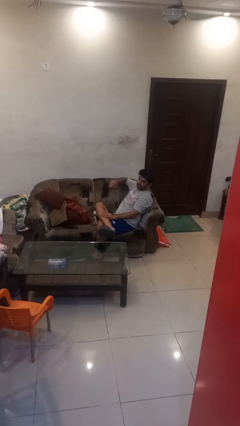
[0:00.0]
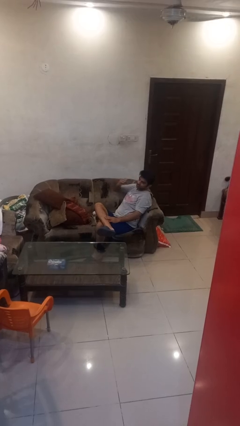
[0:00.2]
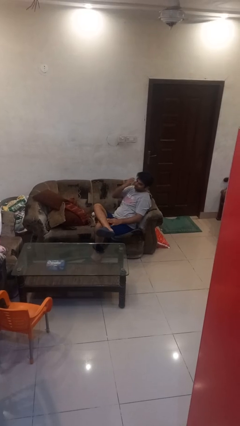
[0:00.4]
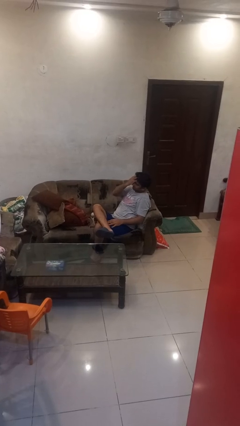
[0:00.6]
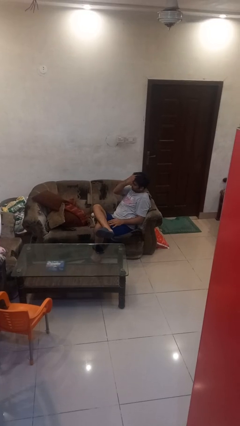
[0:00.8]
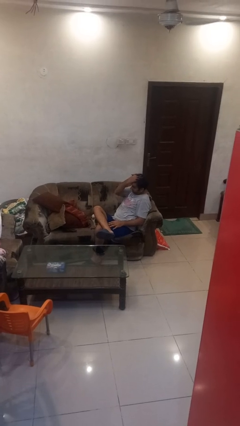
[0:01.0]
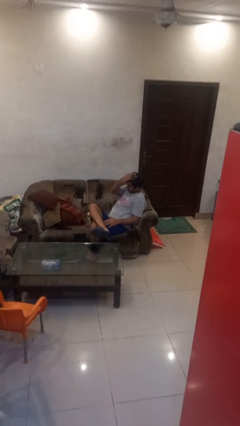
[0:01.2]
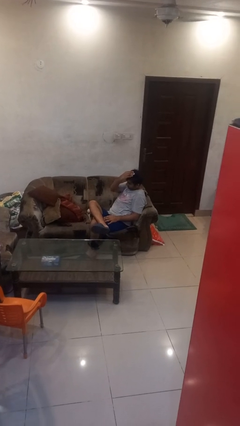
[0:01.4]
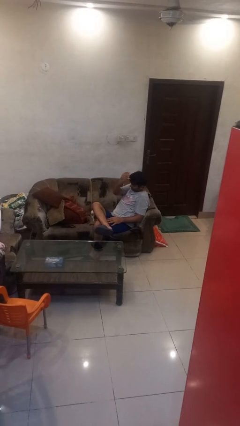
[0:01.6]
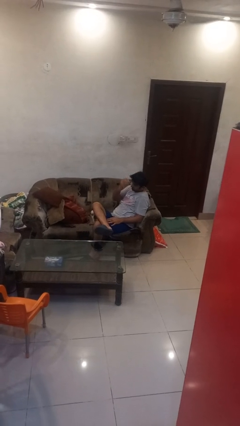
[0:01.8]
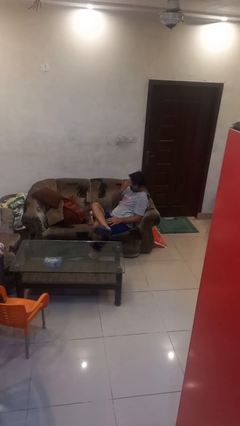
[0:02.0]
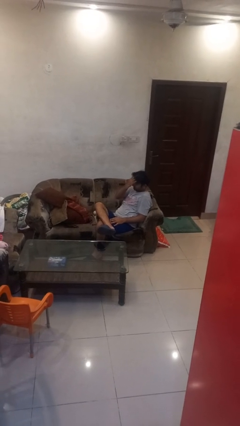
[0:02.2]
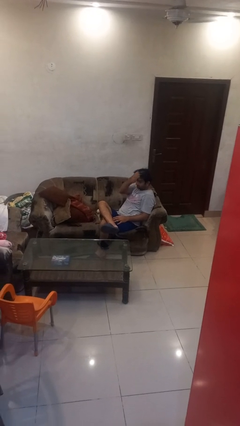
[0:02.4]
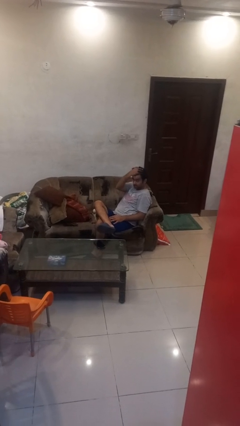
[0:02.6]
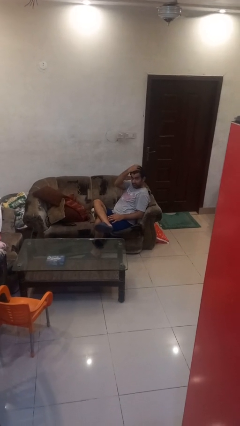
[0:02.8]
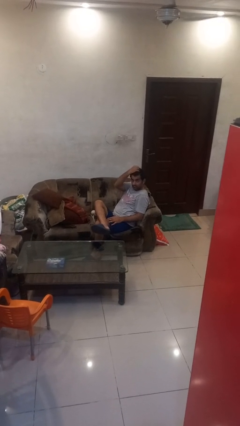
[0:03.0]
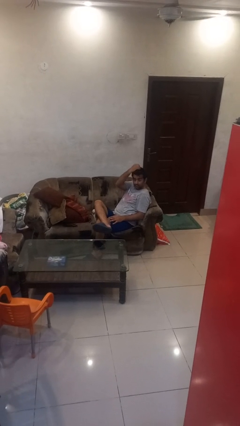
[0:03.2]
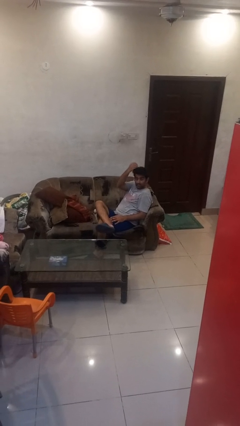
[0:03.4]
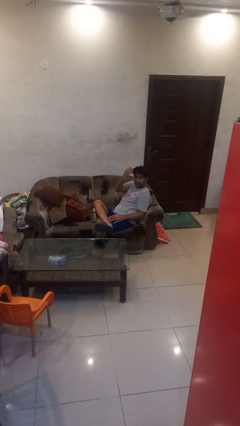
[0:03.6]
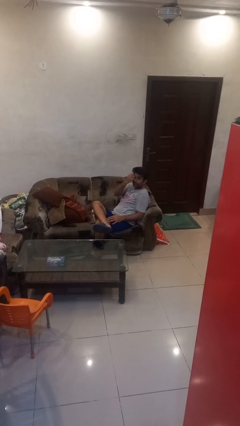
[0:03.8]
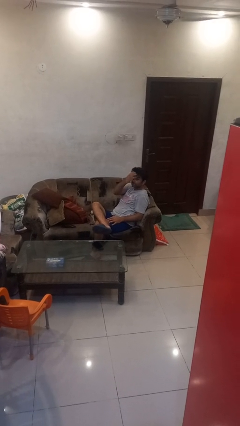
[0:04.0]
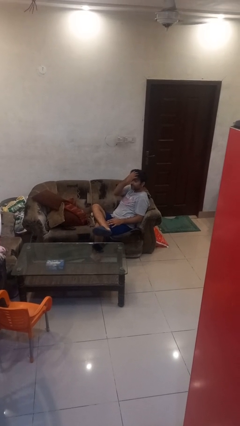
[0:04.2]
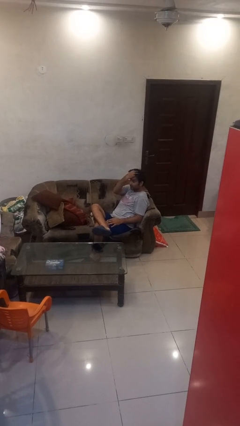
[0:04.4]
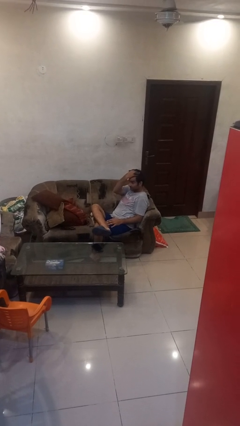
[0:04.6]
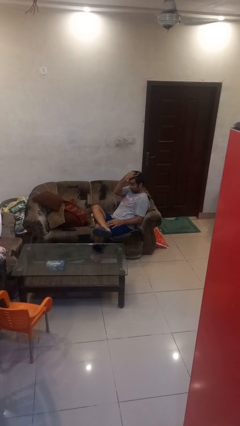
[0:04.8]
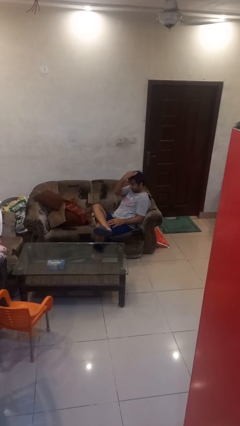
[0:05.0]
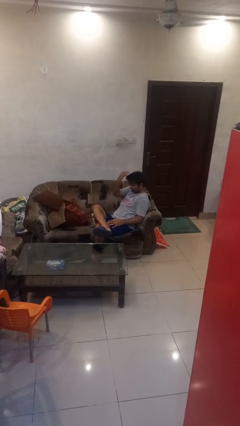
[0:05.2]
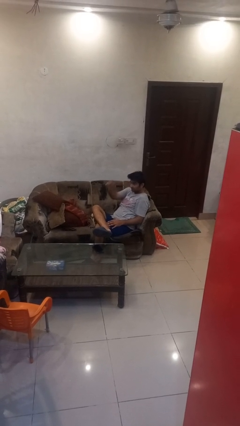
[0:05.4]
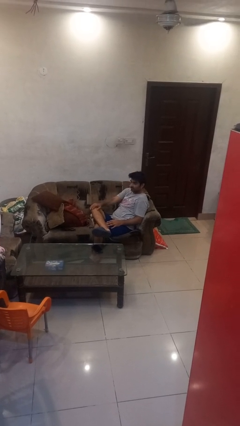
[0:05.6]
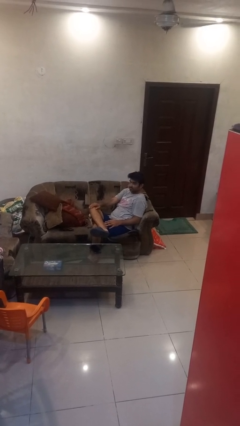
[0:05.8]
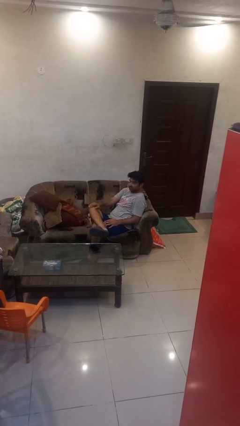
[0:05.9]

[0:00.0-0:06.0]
person strokes hair

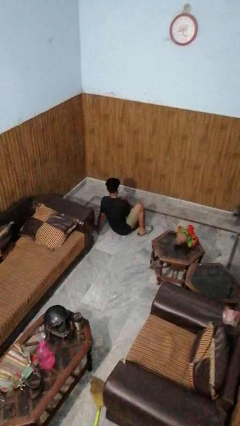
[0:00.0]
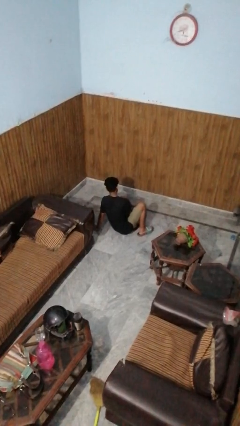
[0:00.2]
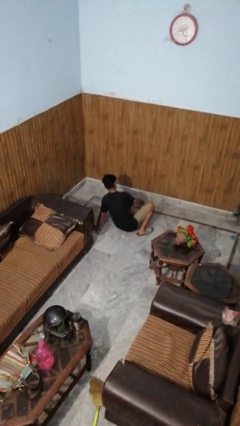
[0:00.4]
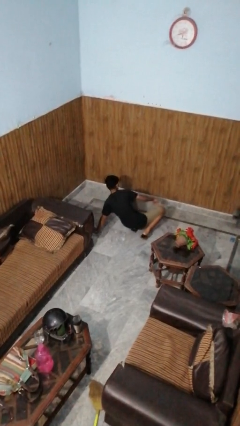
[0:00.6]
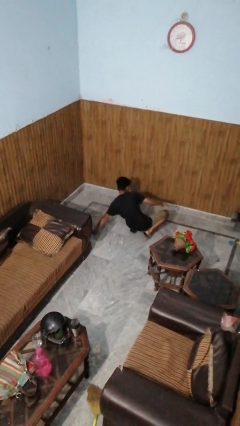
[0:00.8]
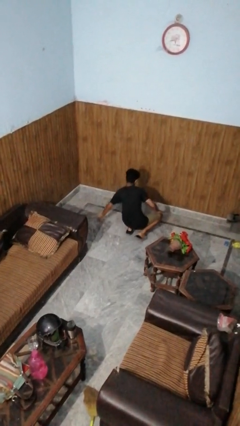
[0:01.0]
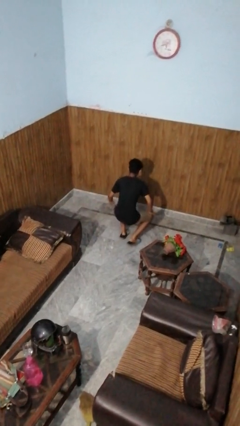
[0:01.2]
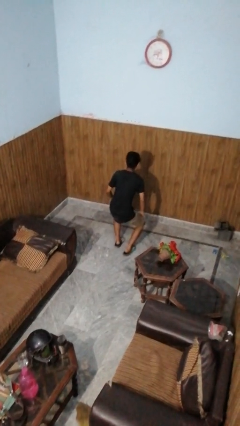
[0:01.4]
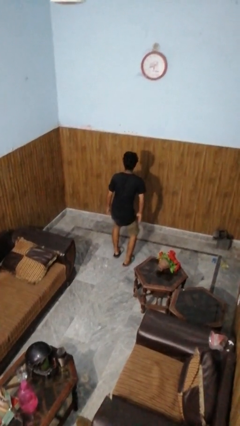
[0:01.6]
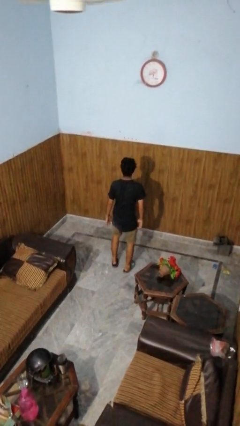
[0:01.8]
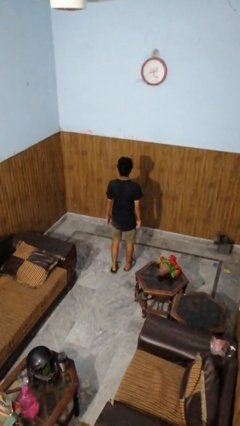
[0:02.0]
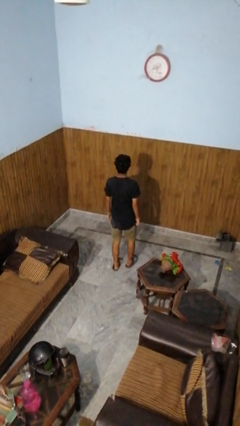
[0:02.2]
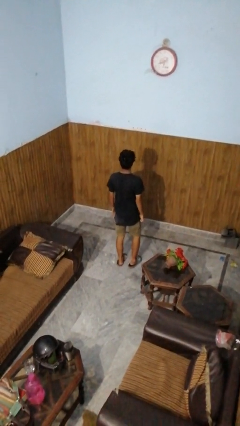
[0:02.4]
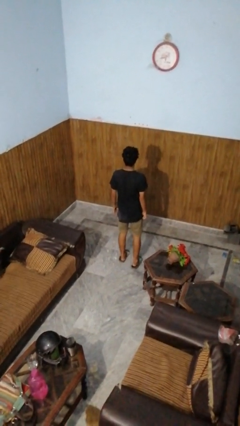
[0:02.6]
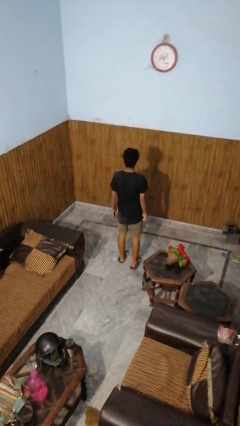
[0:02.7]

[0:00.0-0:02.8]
person stands up from floor

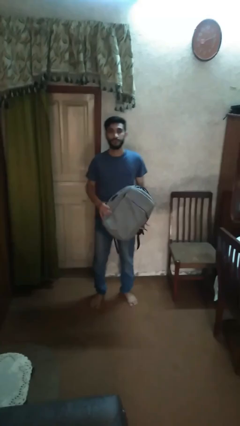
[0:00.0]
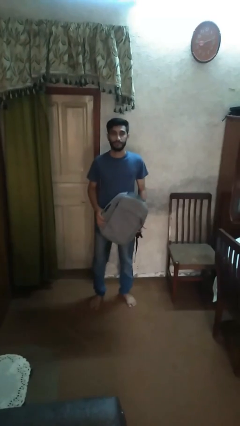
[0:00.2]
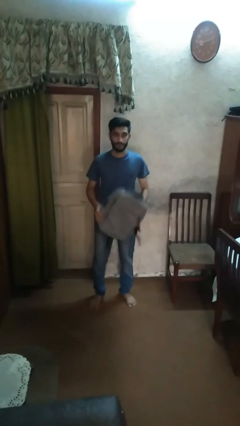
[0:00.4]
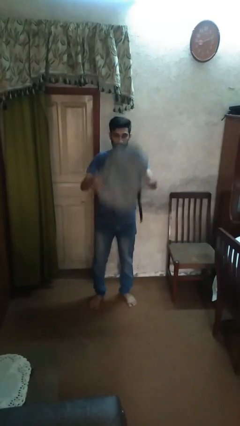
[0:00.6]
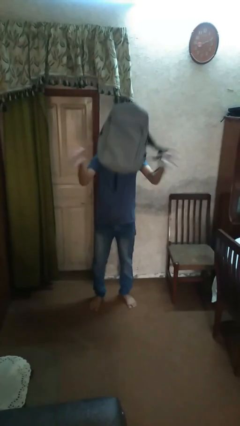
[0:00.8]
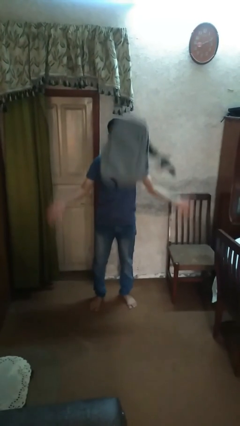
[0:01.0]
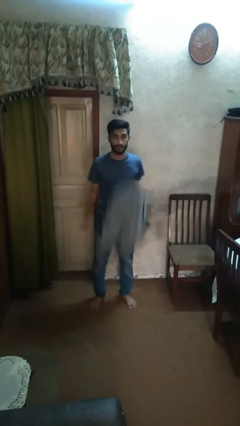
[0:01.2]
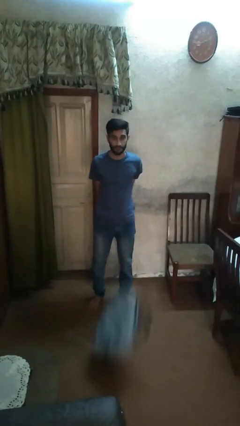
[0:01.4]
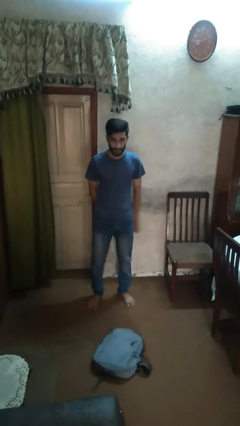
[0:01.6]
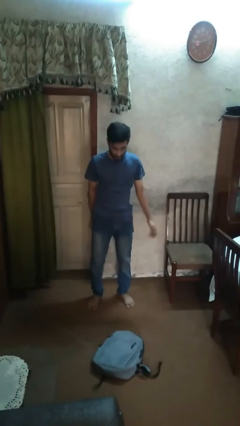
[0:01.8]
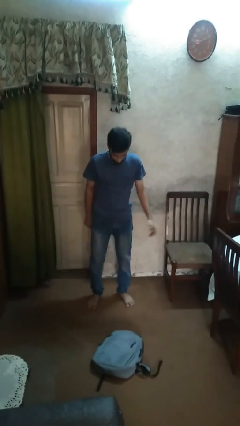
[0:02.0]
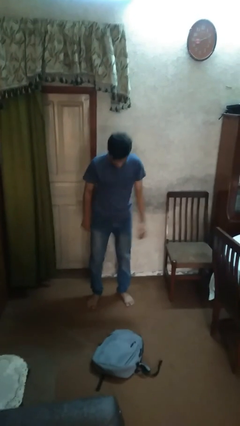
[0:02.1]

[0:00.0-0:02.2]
person throws object into air

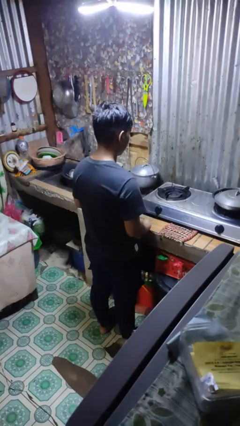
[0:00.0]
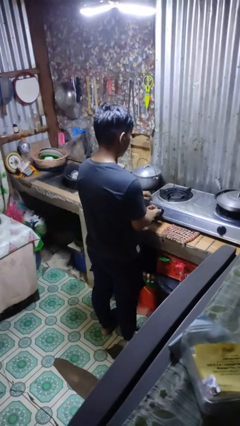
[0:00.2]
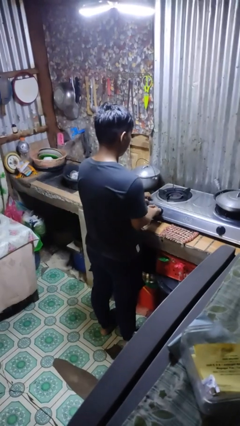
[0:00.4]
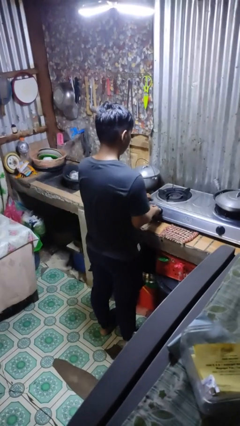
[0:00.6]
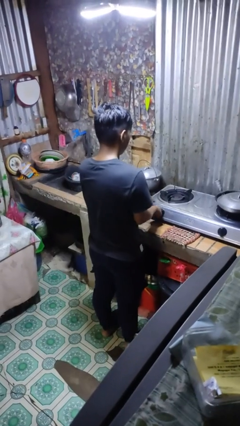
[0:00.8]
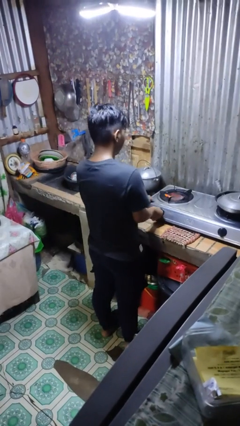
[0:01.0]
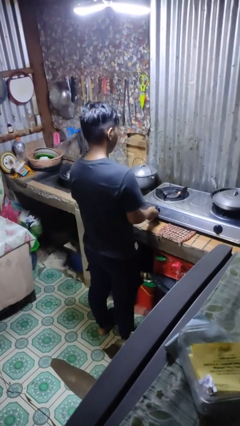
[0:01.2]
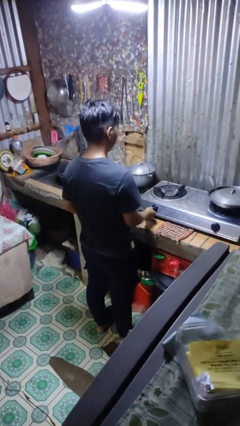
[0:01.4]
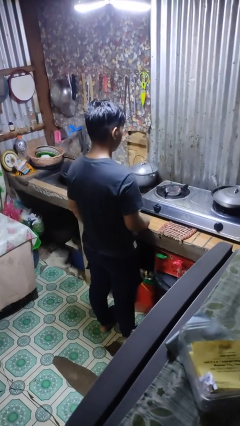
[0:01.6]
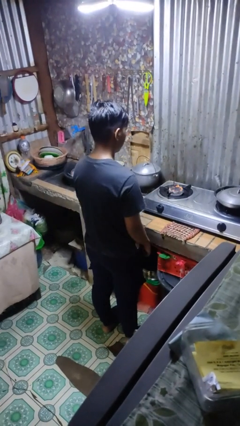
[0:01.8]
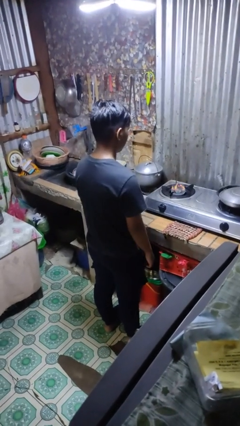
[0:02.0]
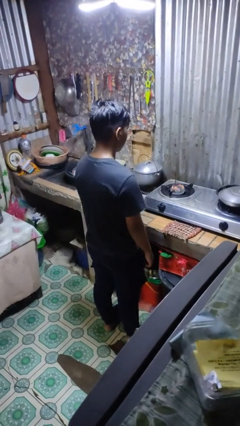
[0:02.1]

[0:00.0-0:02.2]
person turns on stovetop

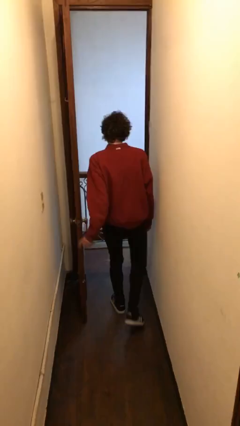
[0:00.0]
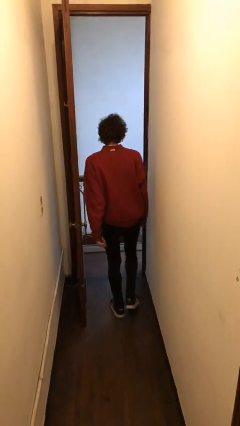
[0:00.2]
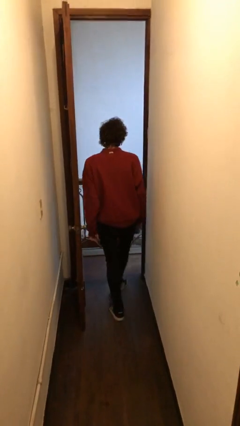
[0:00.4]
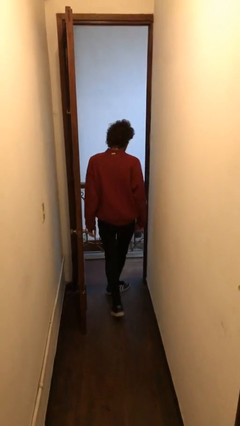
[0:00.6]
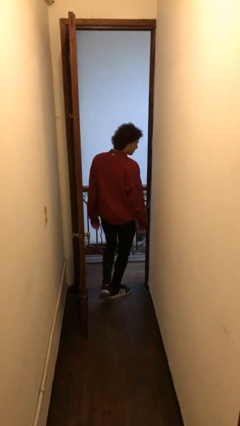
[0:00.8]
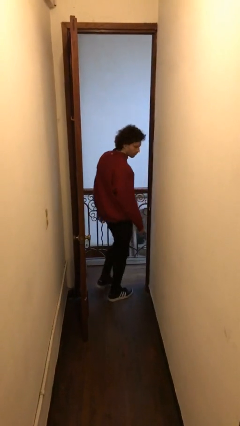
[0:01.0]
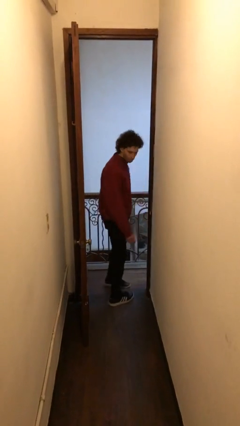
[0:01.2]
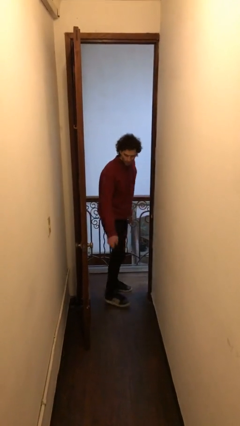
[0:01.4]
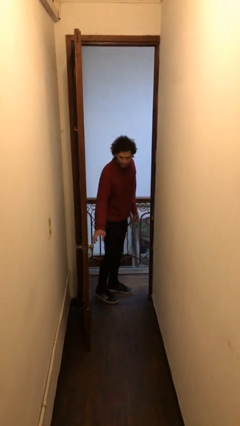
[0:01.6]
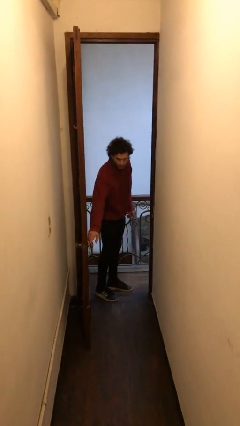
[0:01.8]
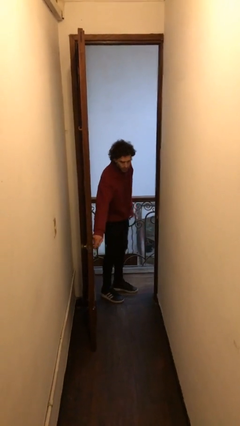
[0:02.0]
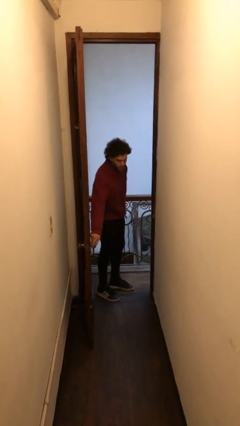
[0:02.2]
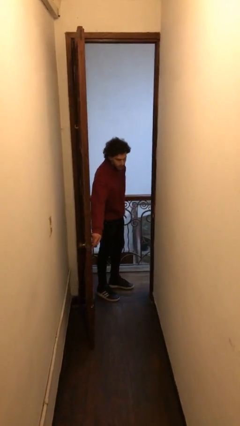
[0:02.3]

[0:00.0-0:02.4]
person exits scene through structure

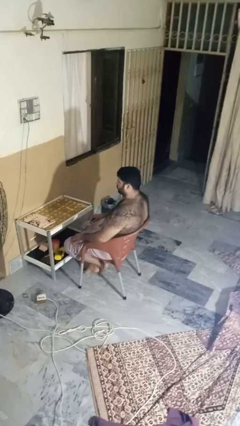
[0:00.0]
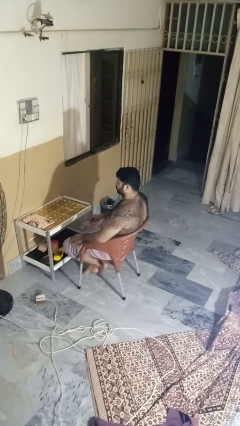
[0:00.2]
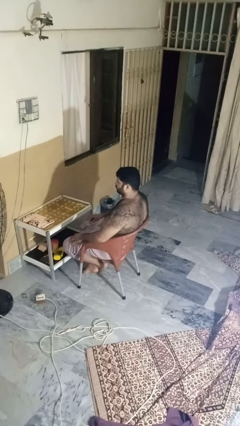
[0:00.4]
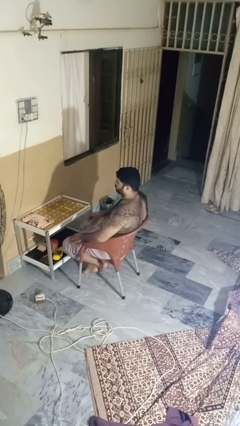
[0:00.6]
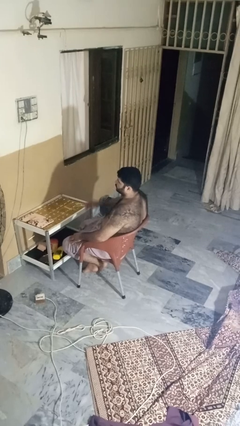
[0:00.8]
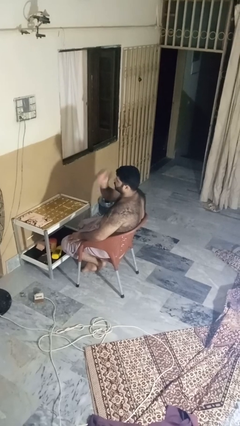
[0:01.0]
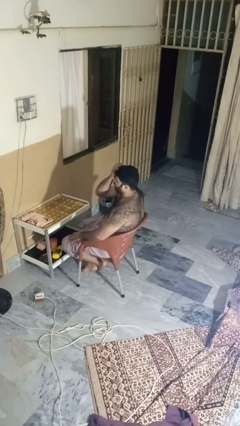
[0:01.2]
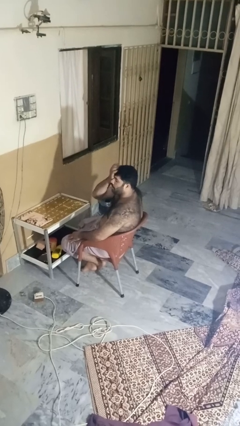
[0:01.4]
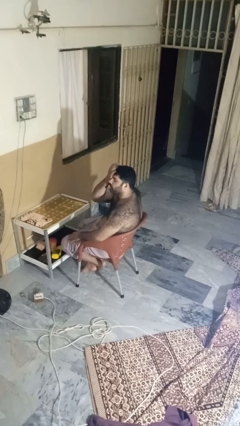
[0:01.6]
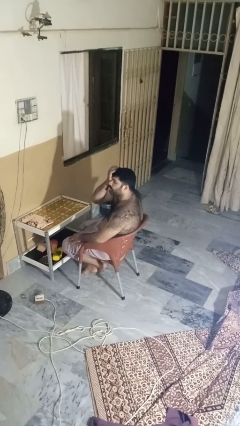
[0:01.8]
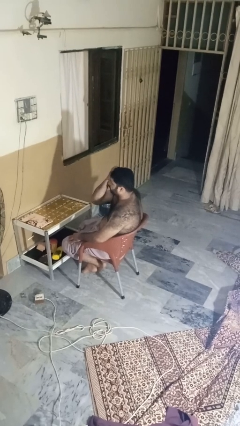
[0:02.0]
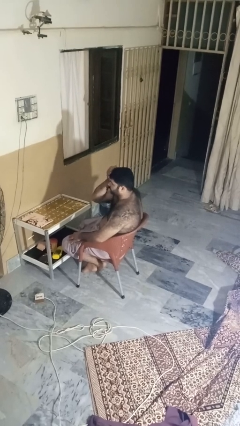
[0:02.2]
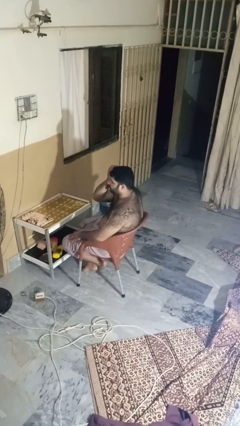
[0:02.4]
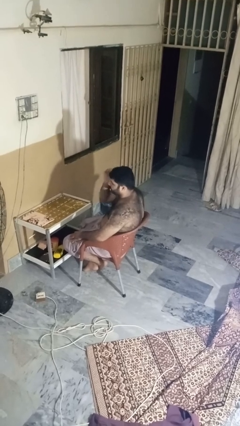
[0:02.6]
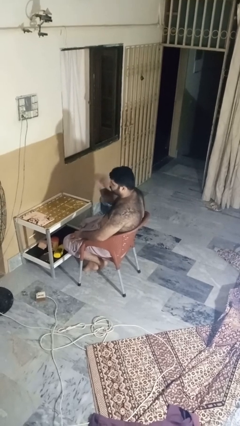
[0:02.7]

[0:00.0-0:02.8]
person rubs eyes
